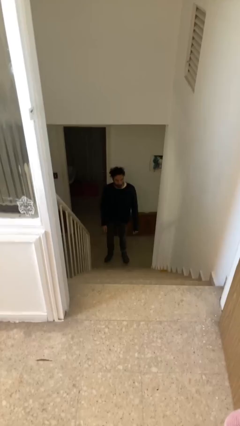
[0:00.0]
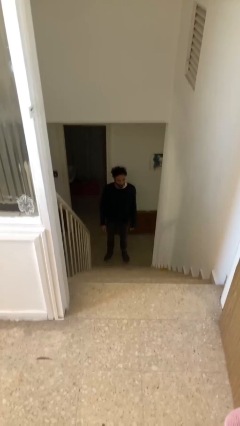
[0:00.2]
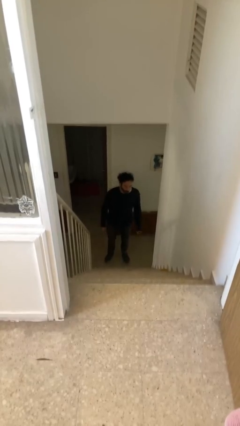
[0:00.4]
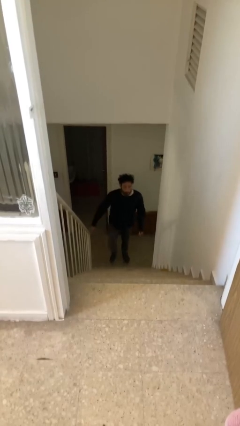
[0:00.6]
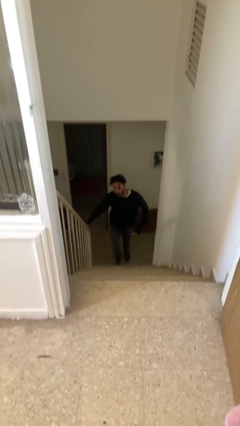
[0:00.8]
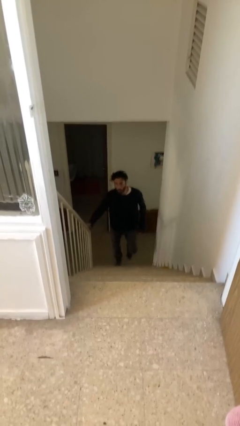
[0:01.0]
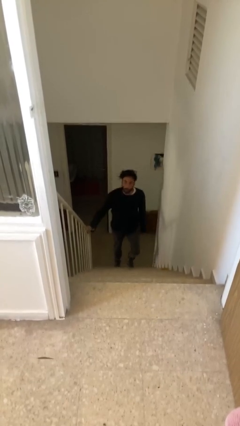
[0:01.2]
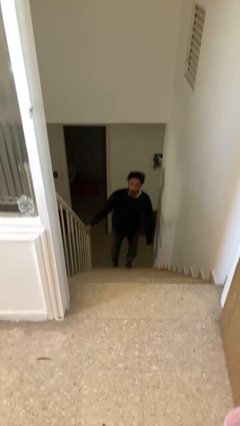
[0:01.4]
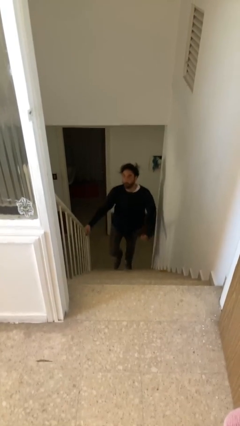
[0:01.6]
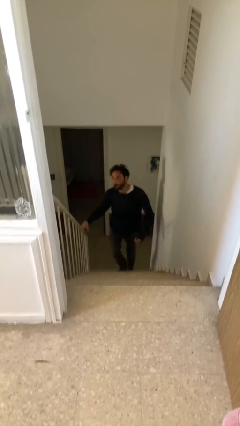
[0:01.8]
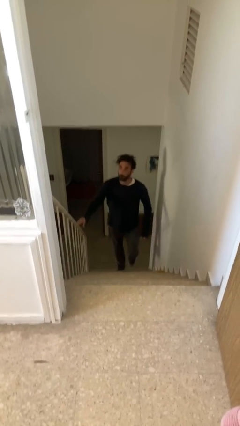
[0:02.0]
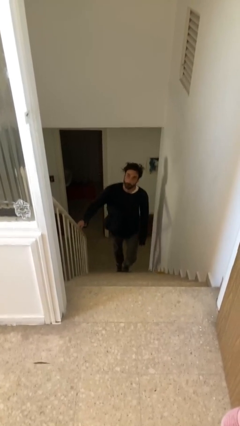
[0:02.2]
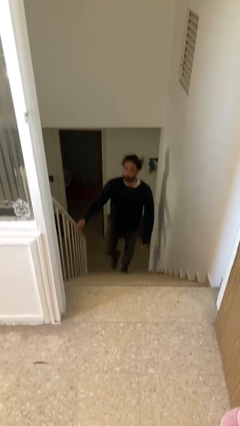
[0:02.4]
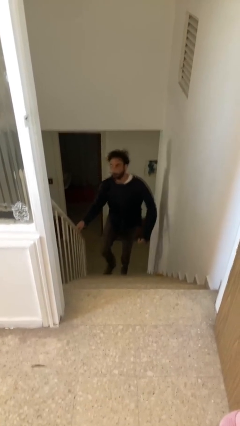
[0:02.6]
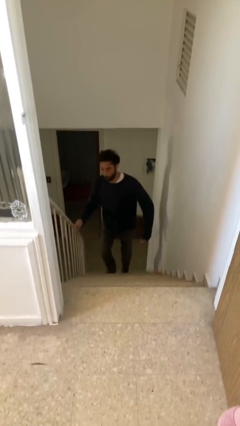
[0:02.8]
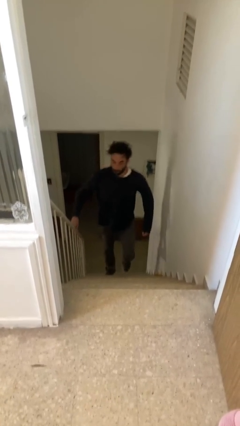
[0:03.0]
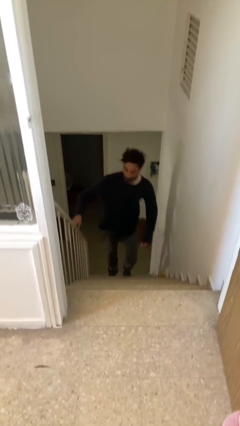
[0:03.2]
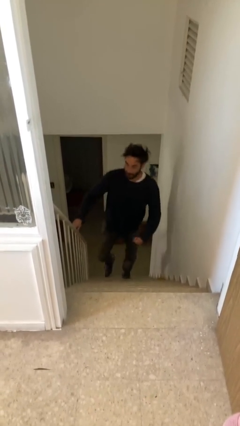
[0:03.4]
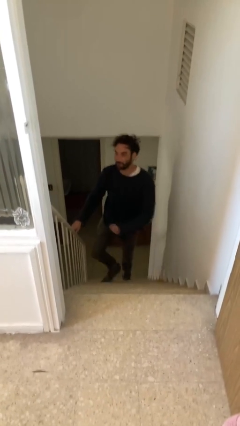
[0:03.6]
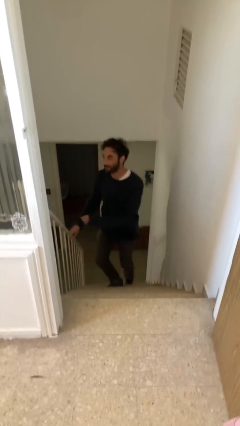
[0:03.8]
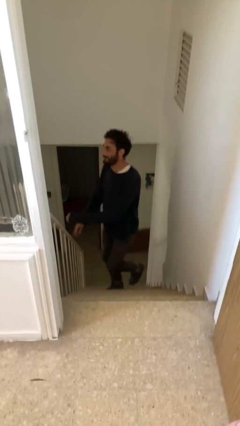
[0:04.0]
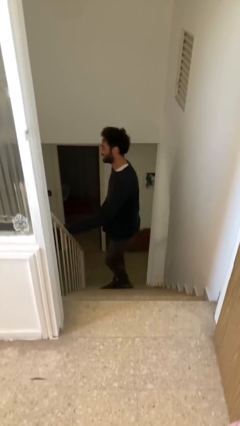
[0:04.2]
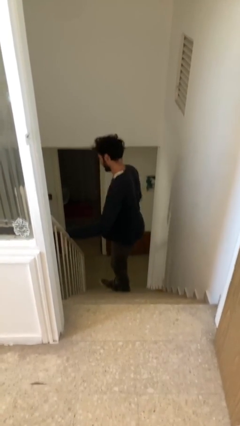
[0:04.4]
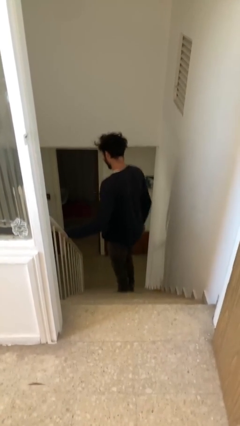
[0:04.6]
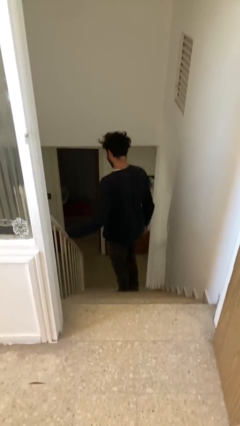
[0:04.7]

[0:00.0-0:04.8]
person climbs up stairs

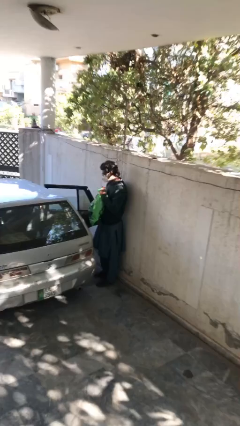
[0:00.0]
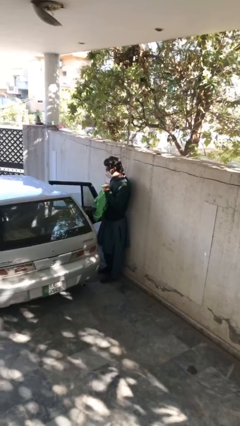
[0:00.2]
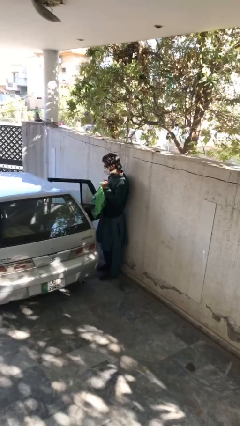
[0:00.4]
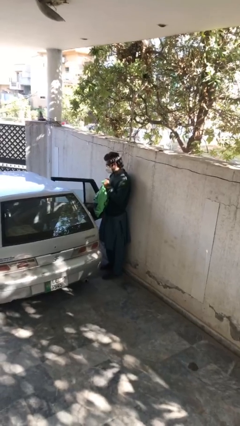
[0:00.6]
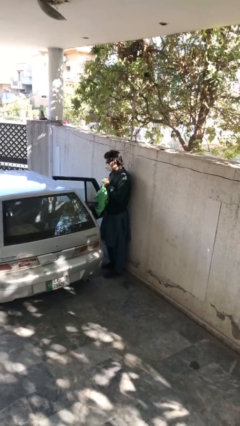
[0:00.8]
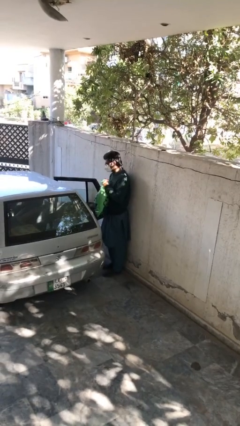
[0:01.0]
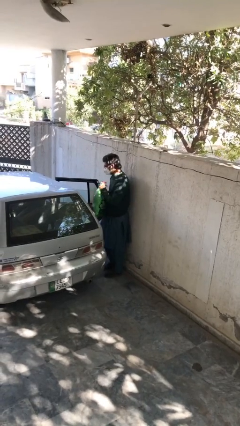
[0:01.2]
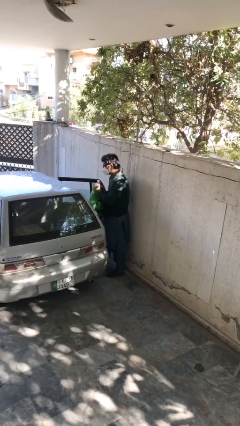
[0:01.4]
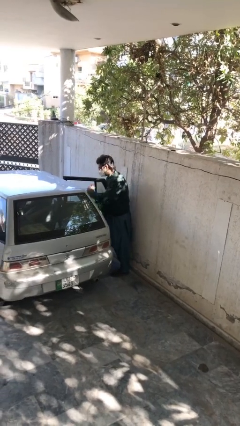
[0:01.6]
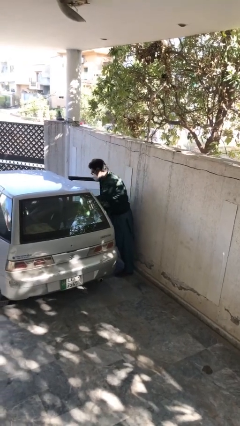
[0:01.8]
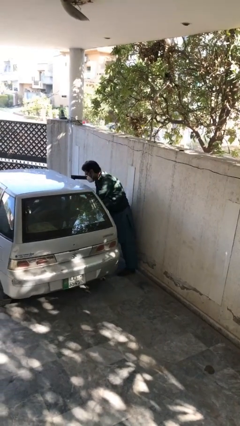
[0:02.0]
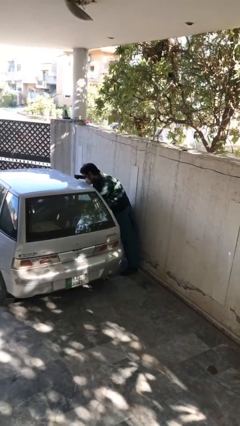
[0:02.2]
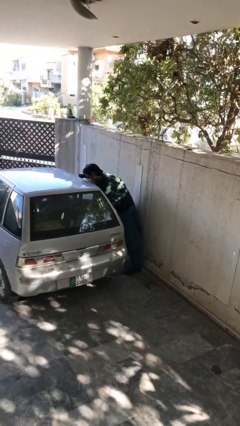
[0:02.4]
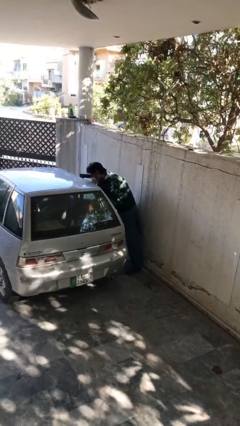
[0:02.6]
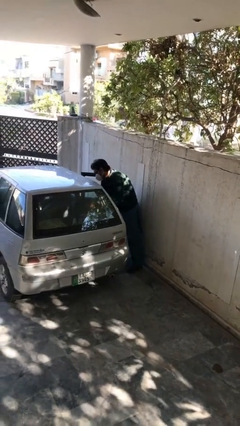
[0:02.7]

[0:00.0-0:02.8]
person loads car

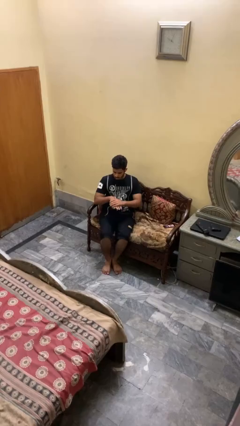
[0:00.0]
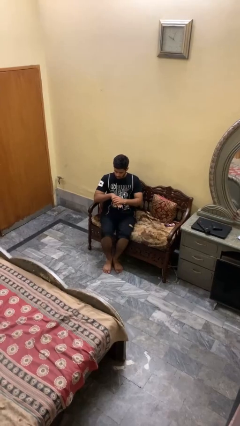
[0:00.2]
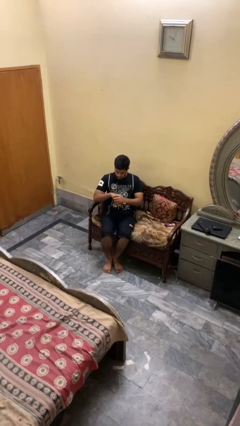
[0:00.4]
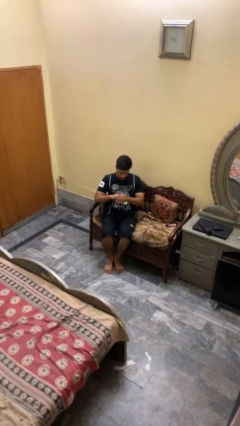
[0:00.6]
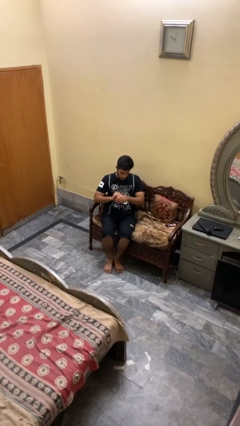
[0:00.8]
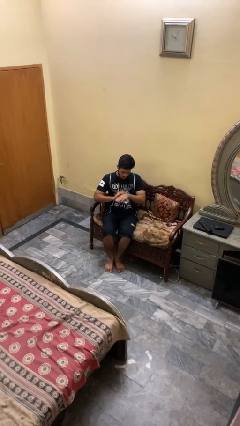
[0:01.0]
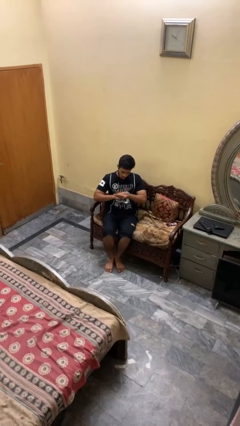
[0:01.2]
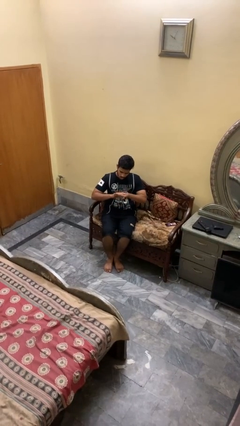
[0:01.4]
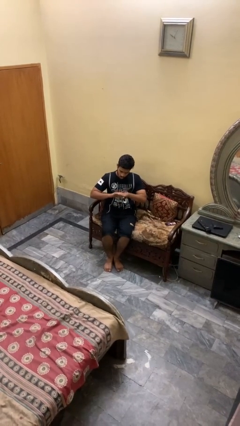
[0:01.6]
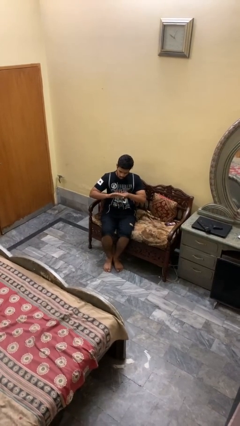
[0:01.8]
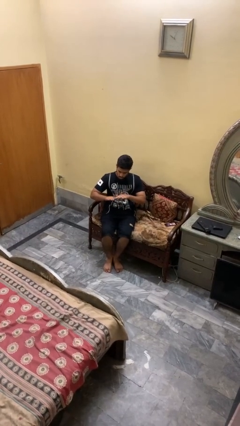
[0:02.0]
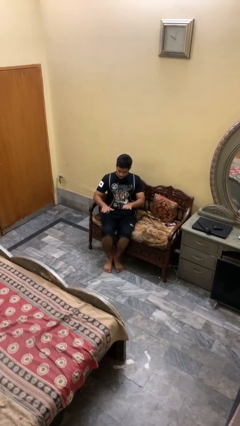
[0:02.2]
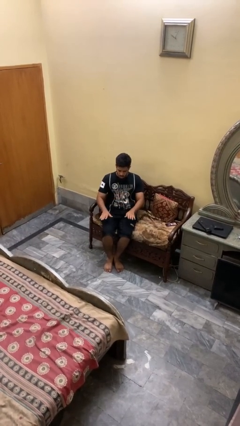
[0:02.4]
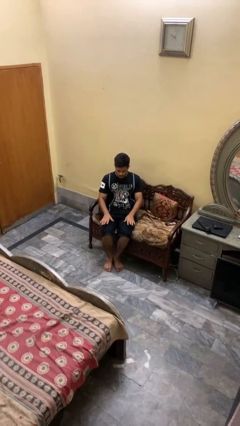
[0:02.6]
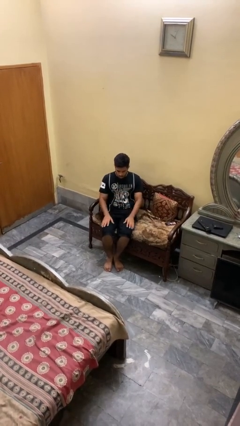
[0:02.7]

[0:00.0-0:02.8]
person looks at hands in lap

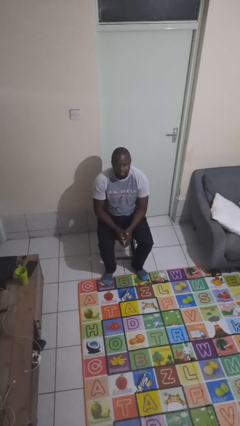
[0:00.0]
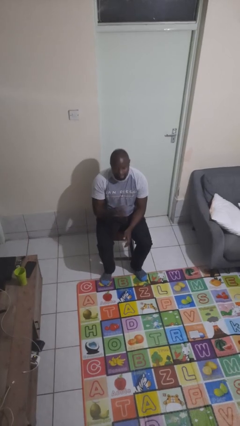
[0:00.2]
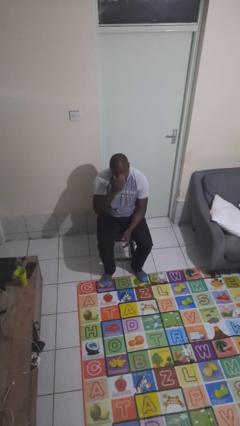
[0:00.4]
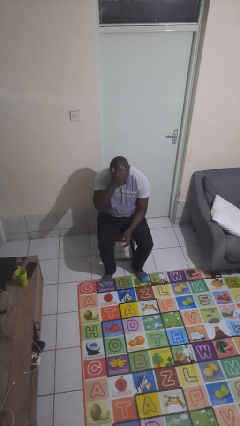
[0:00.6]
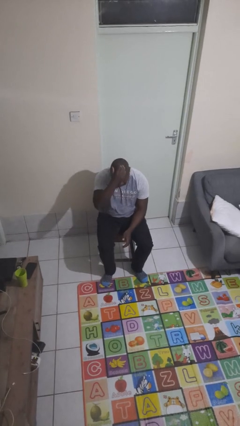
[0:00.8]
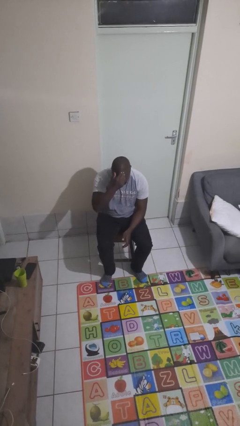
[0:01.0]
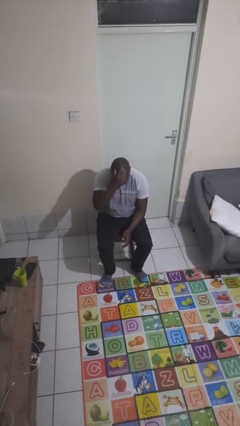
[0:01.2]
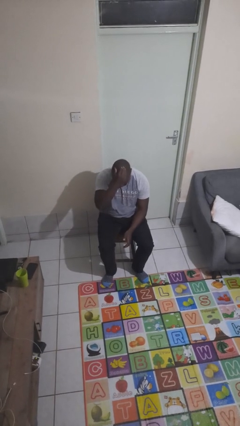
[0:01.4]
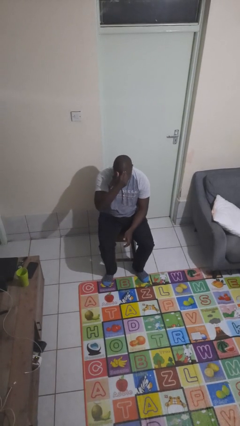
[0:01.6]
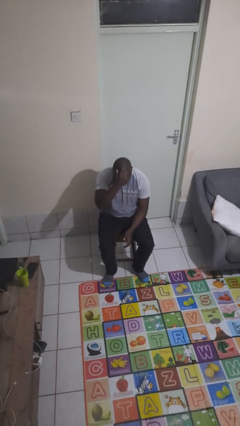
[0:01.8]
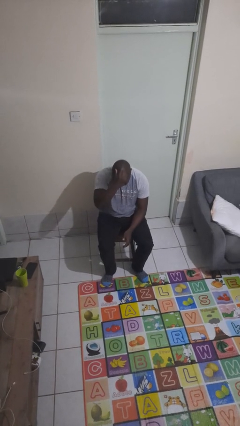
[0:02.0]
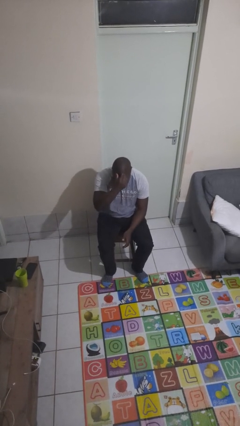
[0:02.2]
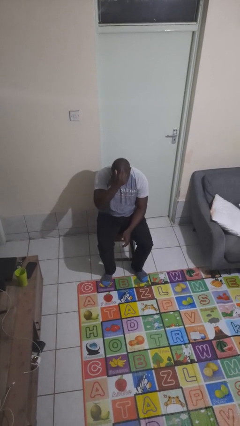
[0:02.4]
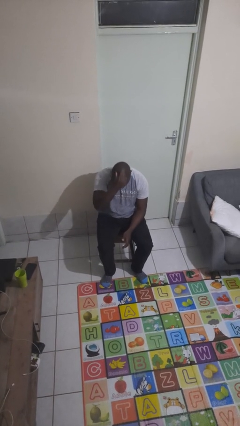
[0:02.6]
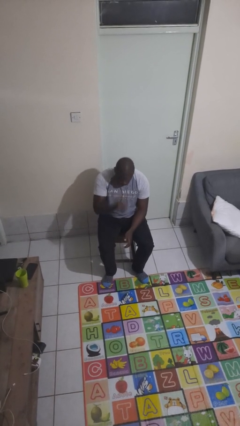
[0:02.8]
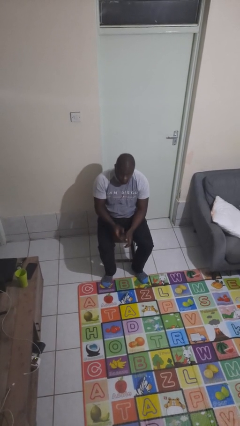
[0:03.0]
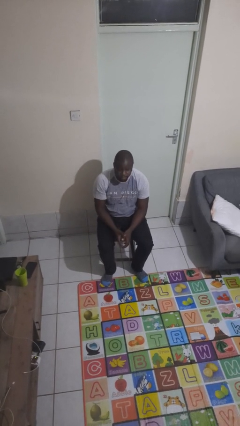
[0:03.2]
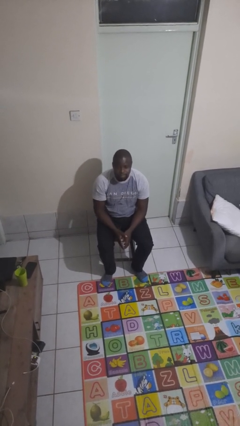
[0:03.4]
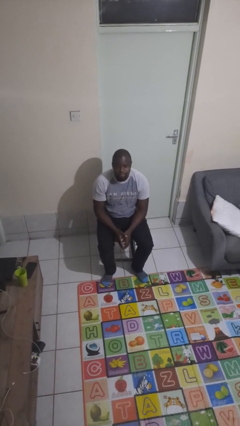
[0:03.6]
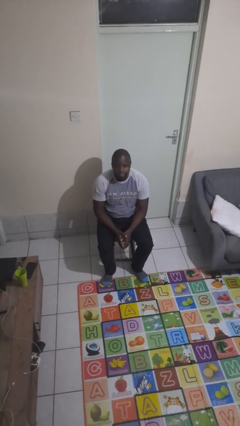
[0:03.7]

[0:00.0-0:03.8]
person scratches face

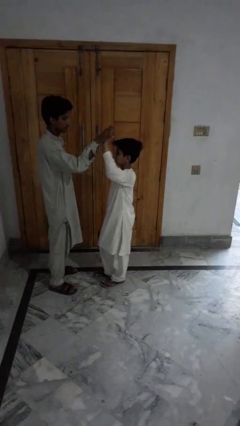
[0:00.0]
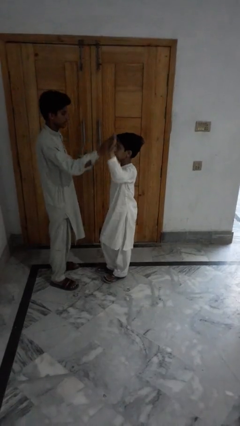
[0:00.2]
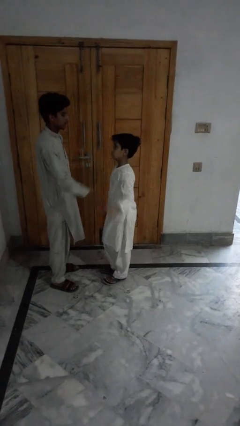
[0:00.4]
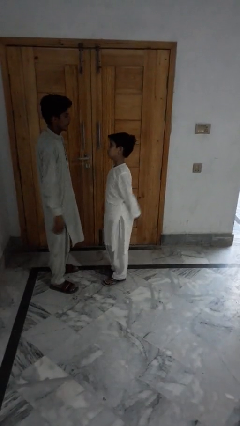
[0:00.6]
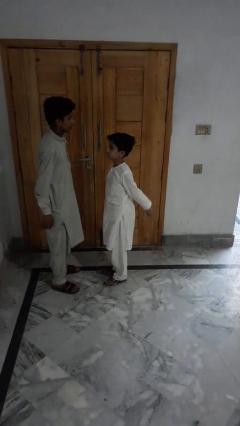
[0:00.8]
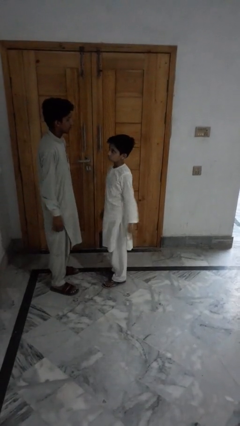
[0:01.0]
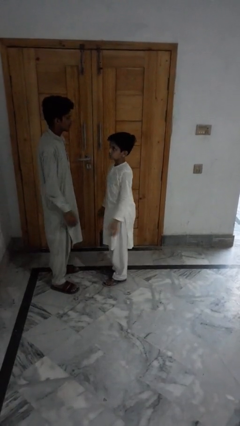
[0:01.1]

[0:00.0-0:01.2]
person highfives hand

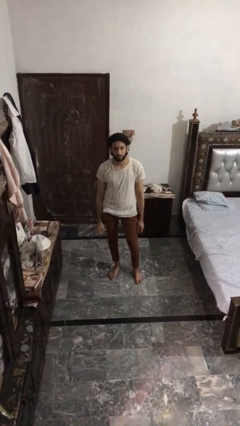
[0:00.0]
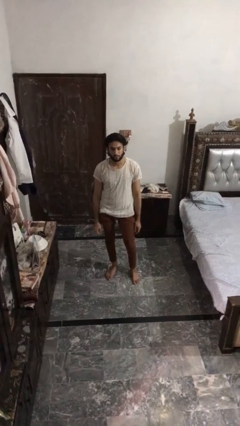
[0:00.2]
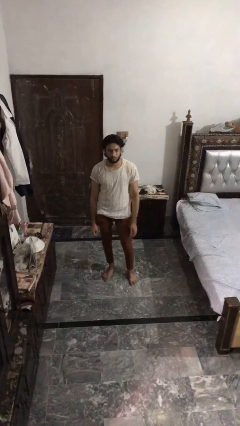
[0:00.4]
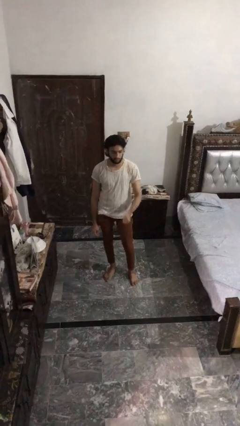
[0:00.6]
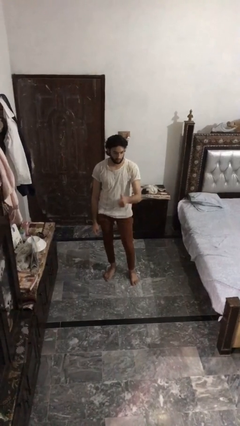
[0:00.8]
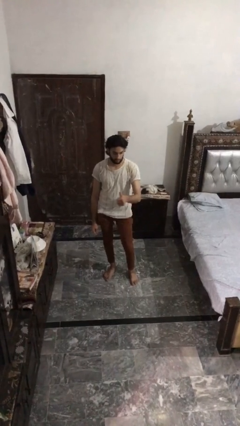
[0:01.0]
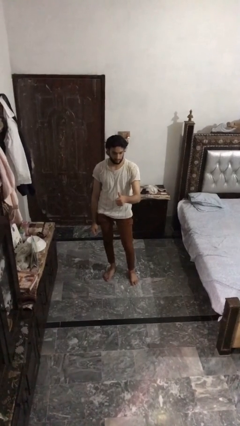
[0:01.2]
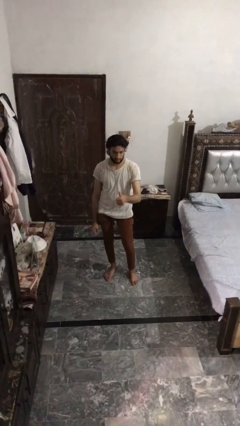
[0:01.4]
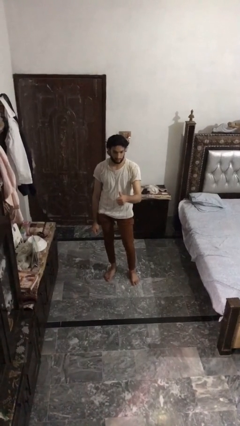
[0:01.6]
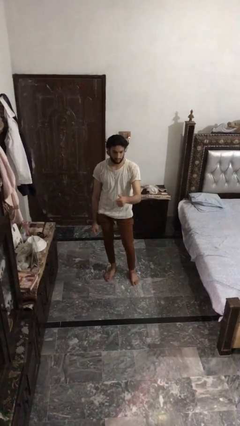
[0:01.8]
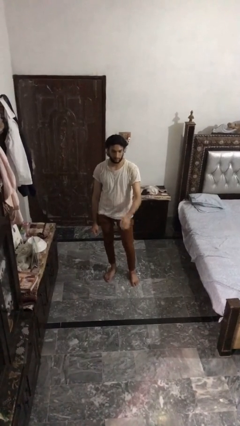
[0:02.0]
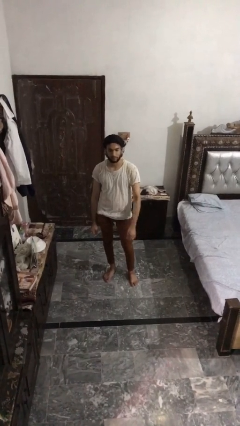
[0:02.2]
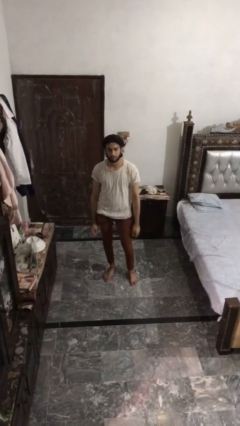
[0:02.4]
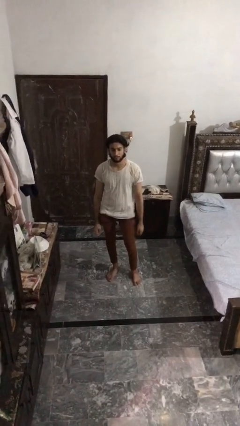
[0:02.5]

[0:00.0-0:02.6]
person gestures thumbs up
